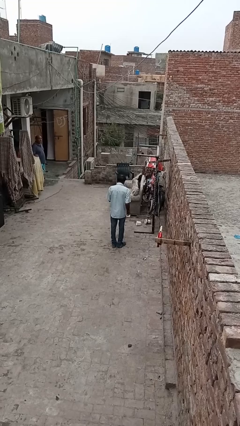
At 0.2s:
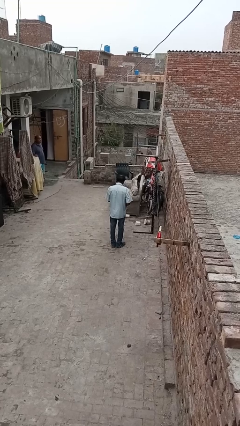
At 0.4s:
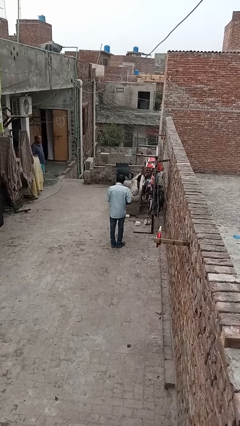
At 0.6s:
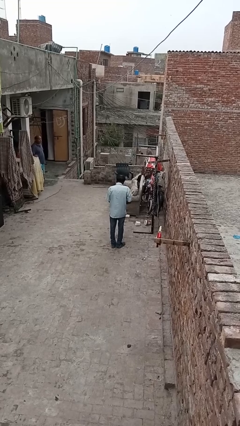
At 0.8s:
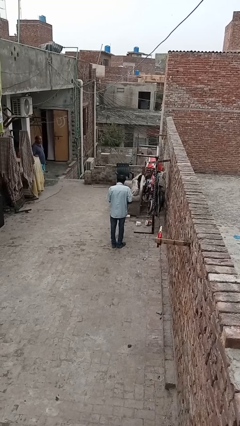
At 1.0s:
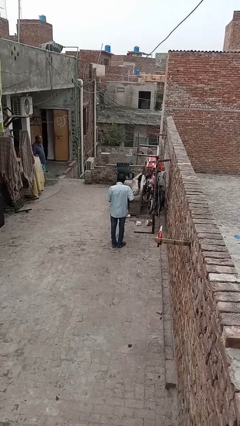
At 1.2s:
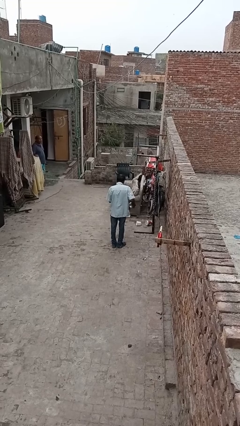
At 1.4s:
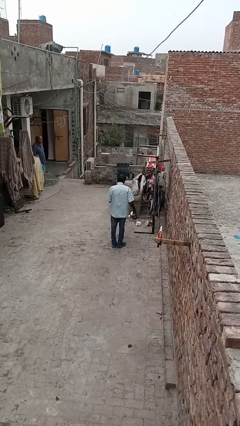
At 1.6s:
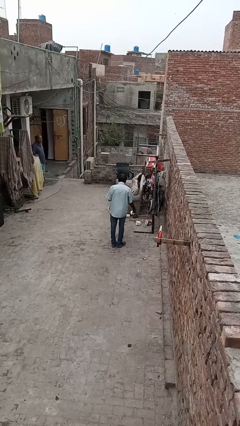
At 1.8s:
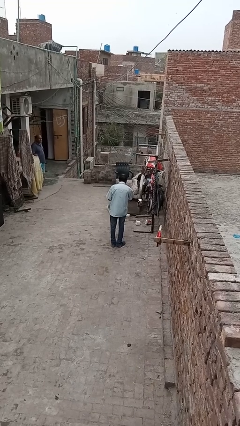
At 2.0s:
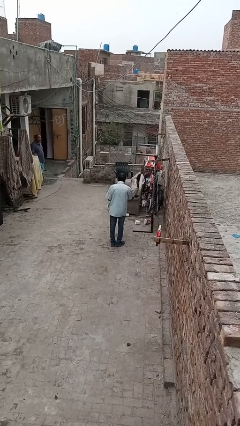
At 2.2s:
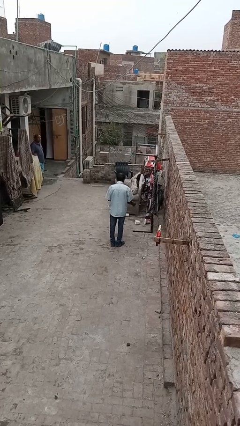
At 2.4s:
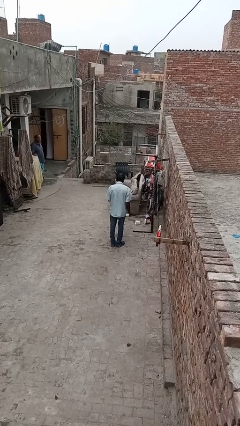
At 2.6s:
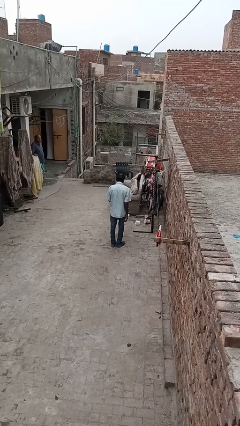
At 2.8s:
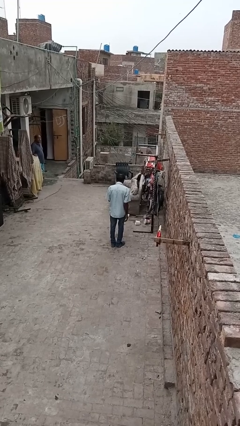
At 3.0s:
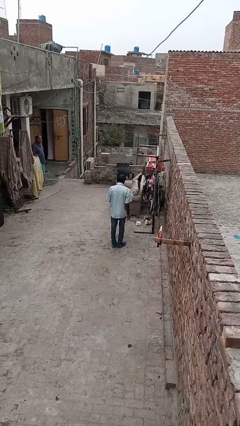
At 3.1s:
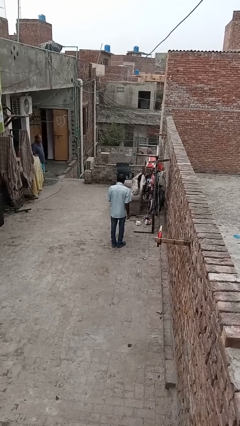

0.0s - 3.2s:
person cleans table with rag

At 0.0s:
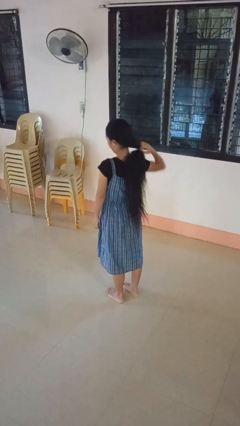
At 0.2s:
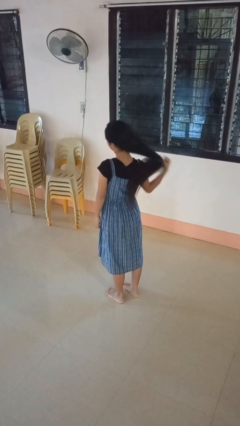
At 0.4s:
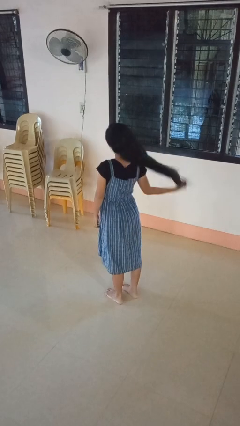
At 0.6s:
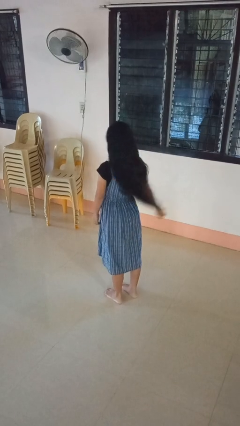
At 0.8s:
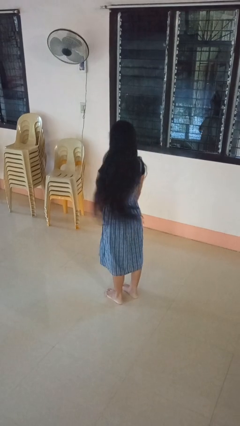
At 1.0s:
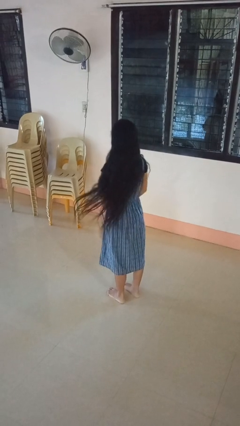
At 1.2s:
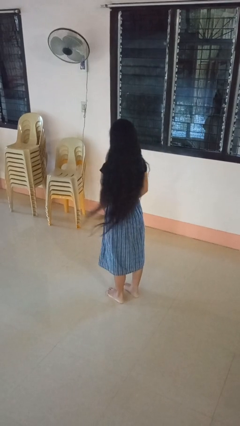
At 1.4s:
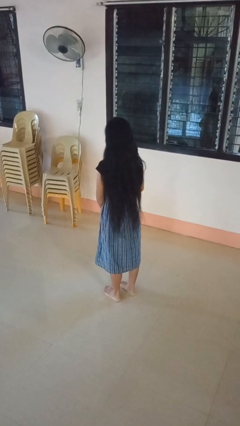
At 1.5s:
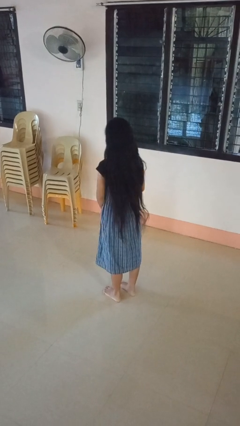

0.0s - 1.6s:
person takes off hairtie

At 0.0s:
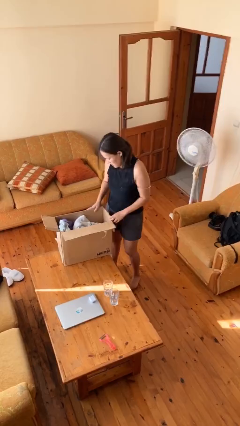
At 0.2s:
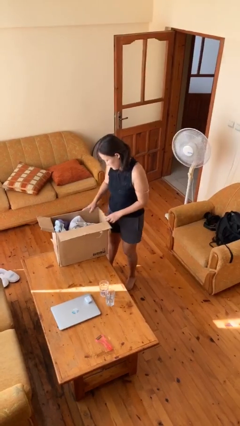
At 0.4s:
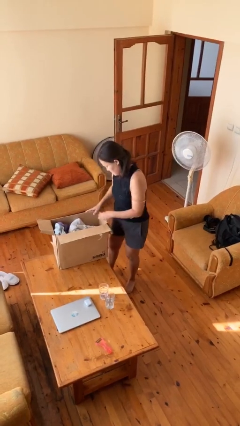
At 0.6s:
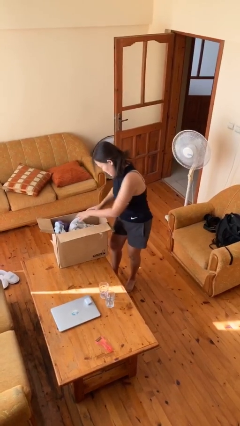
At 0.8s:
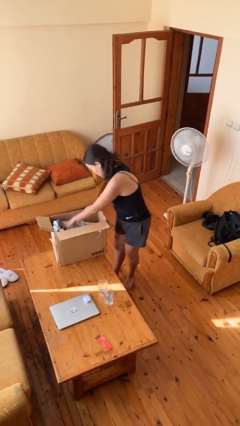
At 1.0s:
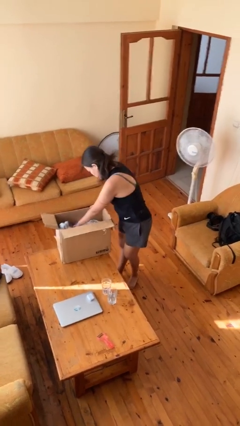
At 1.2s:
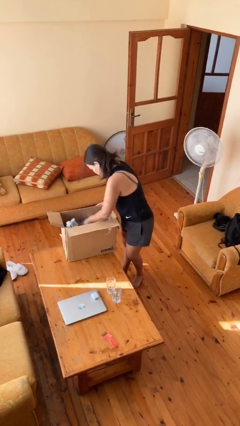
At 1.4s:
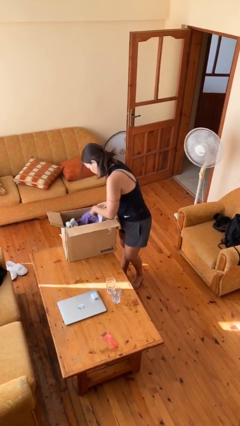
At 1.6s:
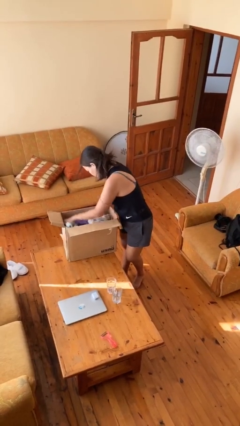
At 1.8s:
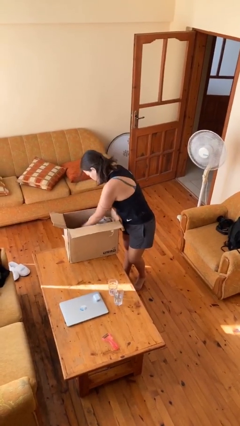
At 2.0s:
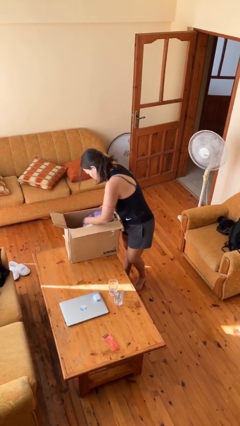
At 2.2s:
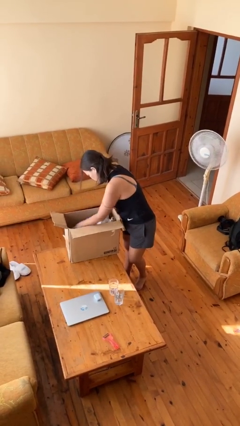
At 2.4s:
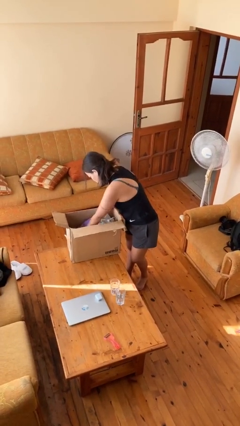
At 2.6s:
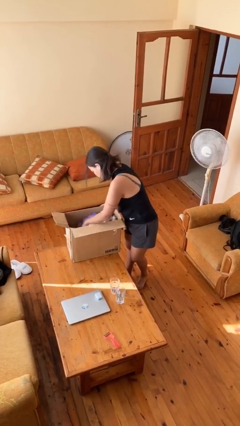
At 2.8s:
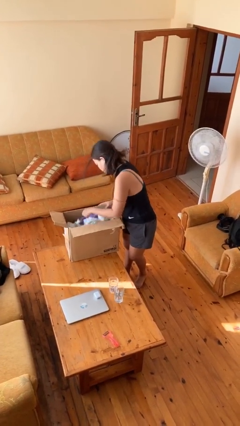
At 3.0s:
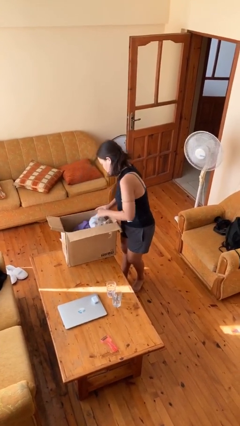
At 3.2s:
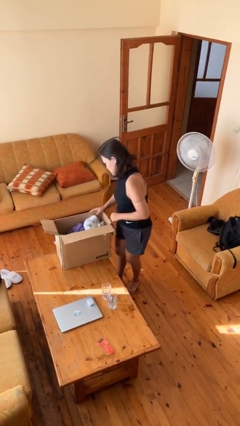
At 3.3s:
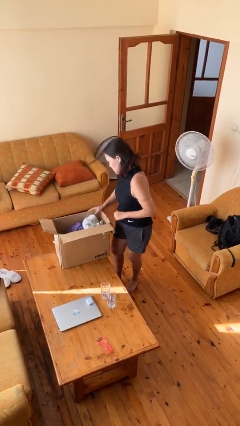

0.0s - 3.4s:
person searches in box

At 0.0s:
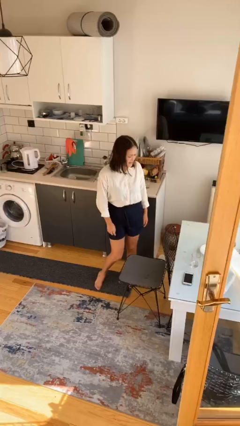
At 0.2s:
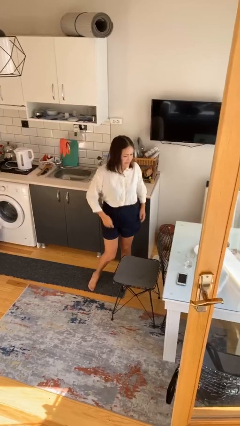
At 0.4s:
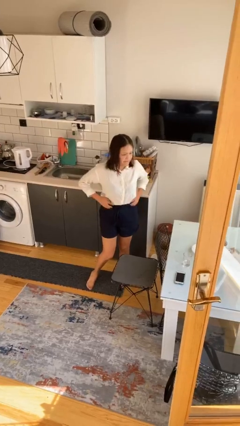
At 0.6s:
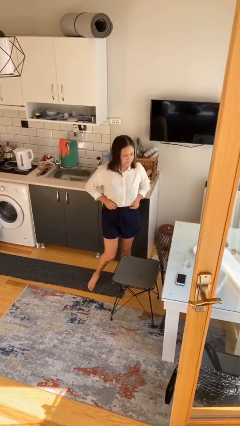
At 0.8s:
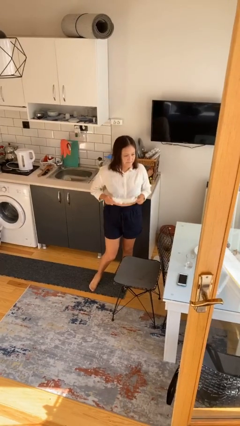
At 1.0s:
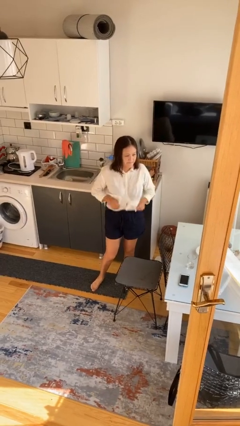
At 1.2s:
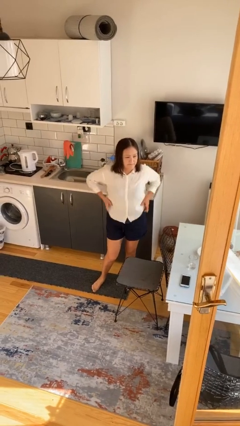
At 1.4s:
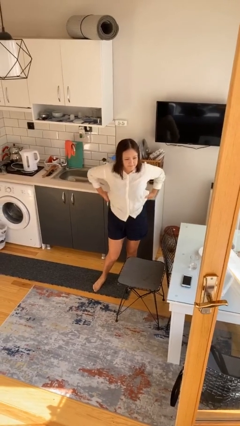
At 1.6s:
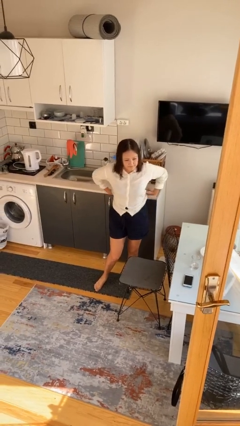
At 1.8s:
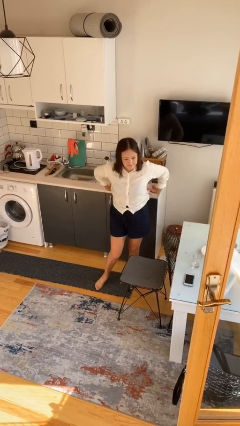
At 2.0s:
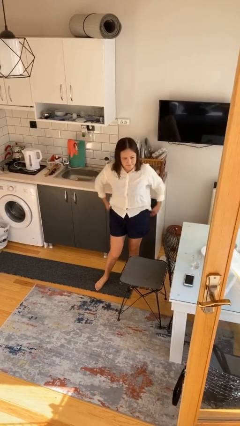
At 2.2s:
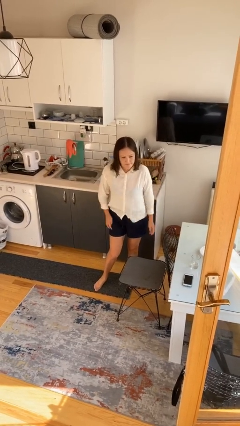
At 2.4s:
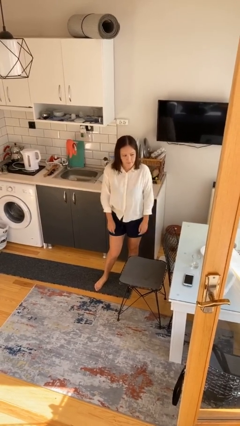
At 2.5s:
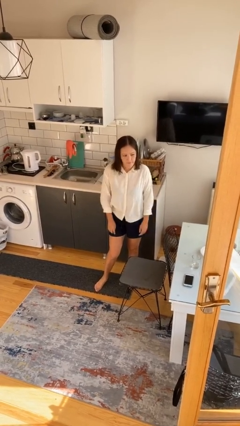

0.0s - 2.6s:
person untucks shirt

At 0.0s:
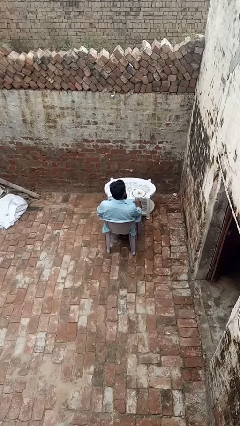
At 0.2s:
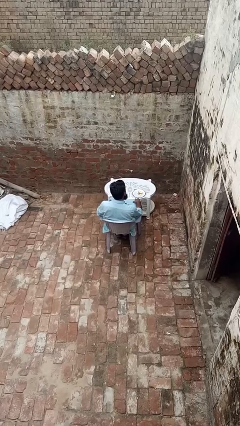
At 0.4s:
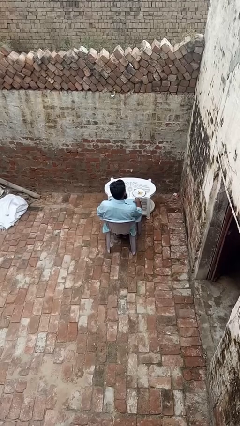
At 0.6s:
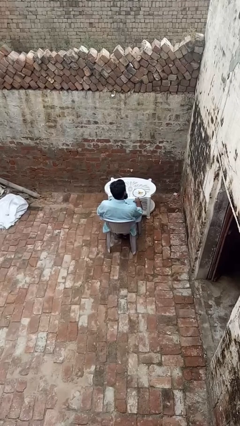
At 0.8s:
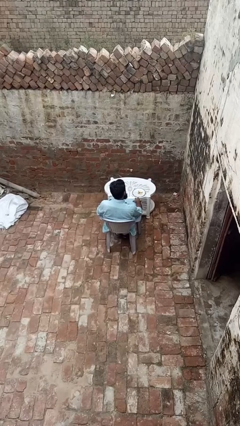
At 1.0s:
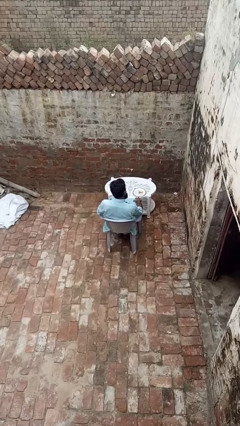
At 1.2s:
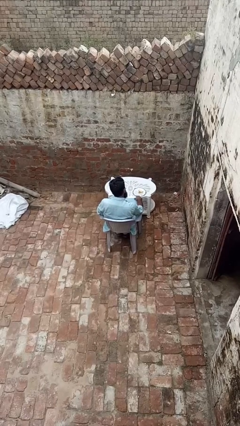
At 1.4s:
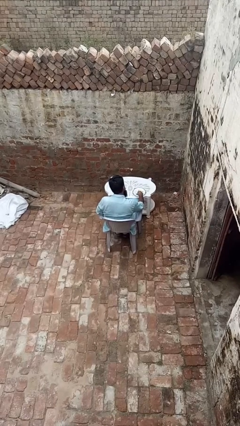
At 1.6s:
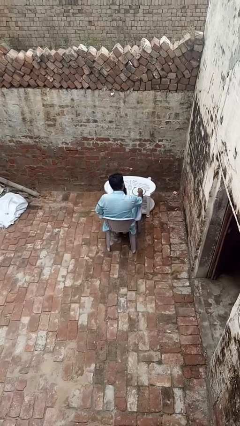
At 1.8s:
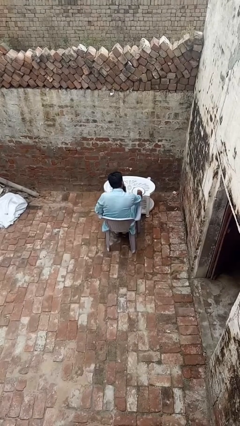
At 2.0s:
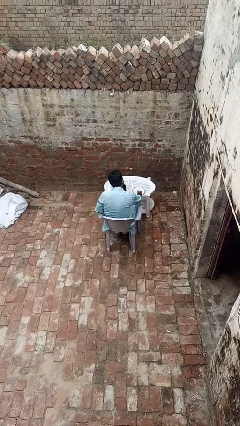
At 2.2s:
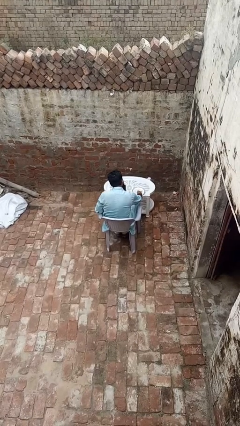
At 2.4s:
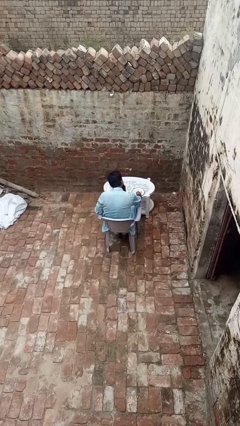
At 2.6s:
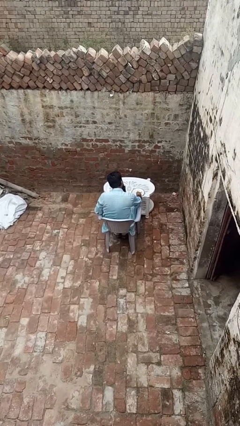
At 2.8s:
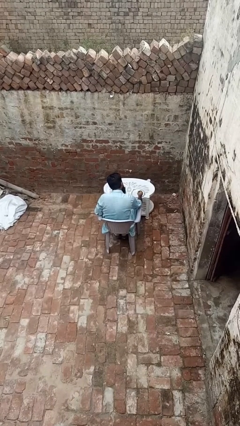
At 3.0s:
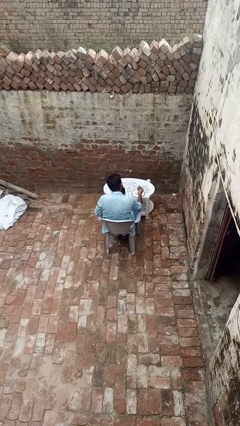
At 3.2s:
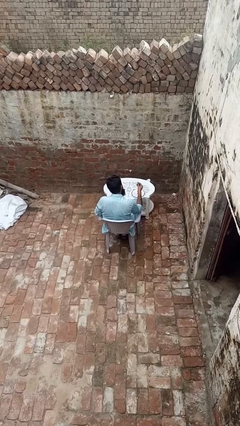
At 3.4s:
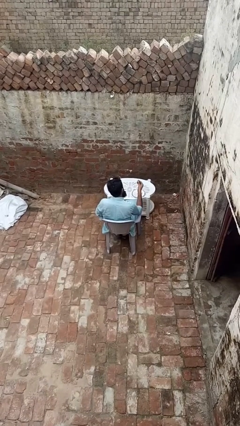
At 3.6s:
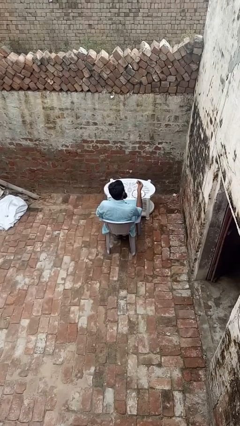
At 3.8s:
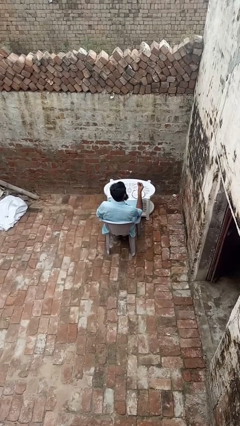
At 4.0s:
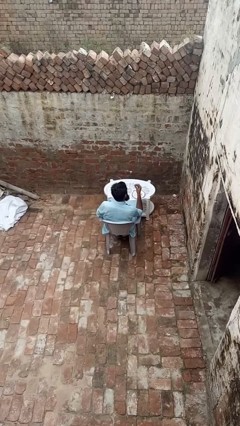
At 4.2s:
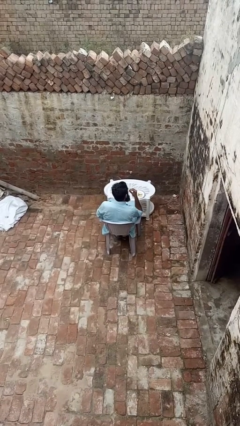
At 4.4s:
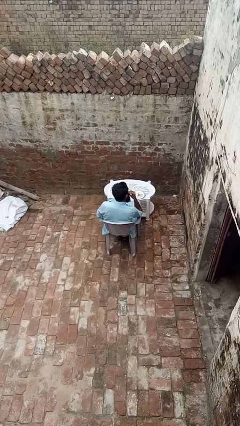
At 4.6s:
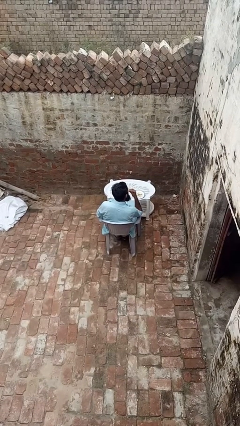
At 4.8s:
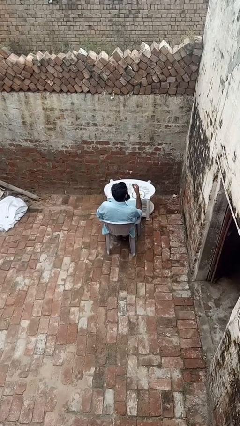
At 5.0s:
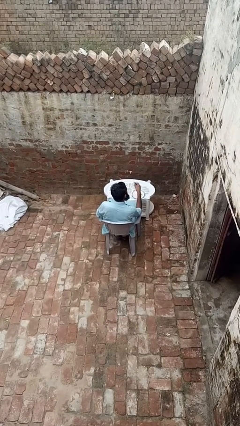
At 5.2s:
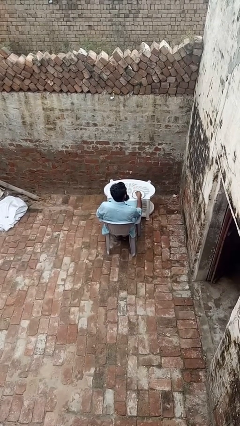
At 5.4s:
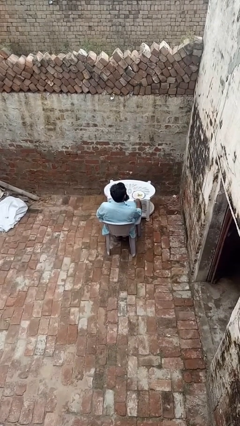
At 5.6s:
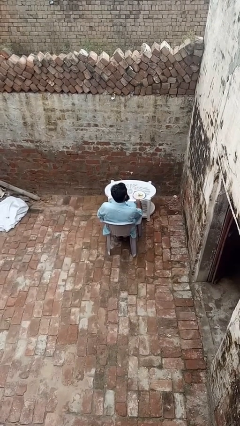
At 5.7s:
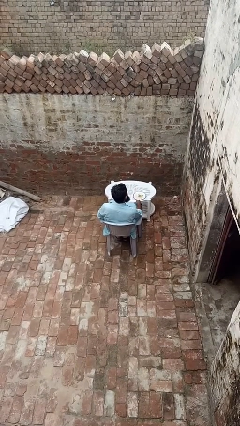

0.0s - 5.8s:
person eats with hands

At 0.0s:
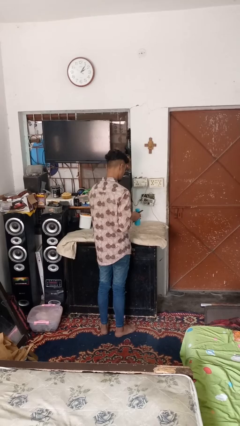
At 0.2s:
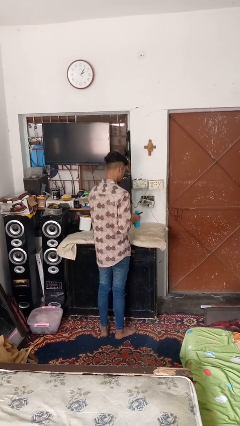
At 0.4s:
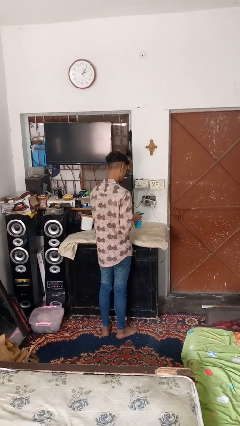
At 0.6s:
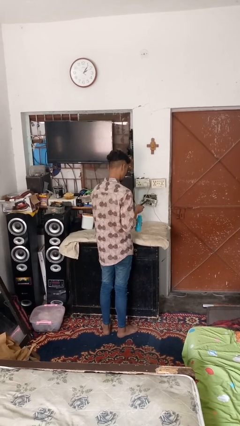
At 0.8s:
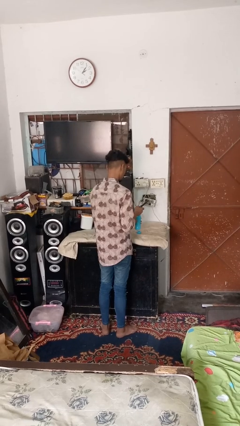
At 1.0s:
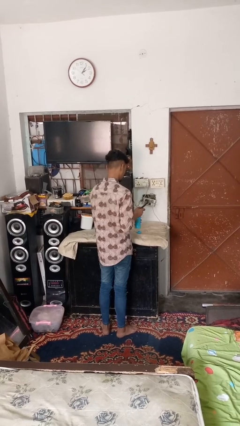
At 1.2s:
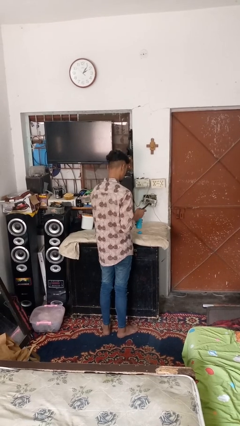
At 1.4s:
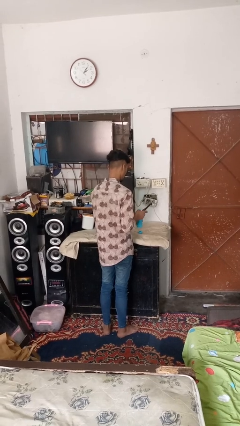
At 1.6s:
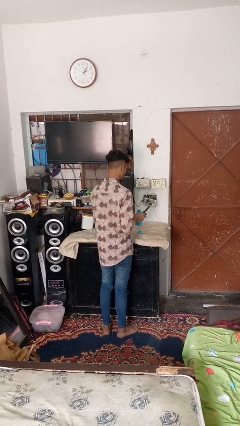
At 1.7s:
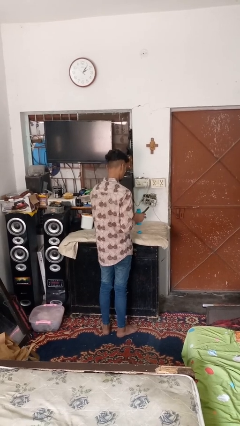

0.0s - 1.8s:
person opens can with can opener
